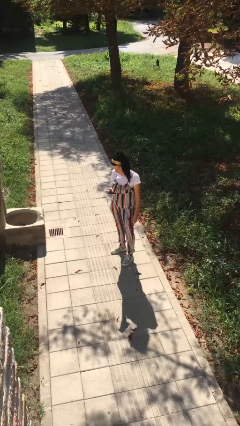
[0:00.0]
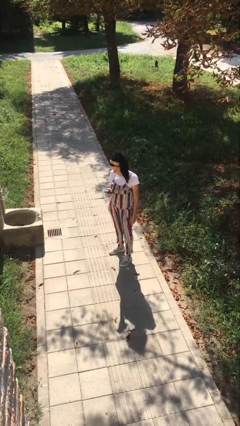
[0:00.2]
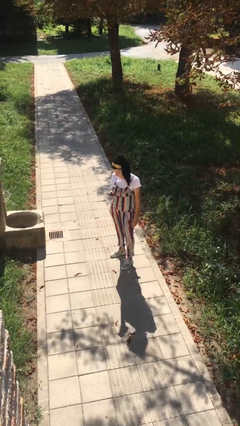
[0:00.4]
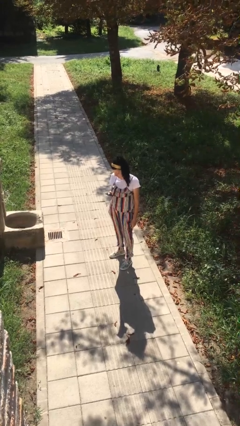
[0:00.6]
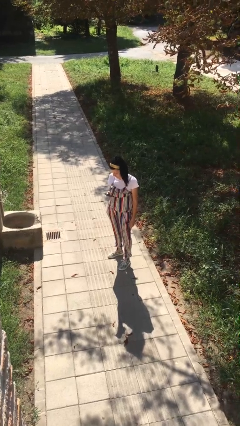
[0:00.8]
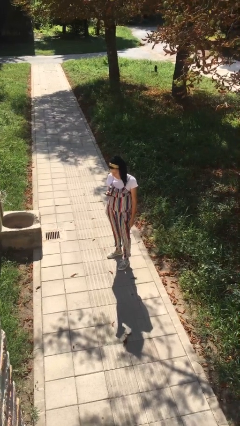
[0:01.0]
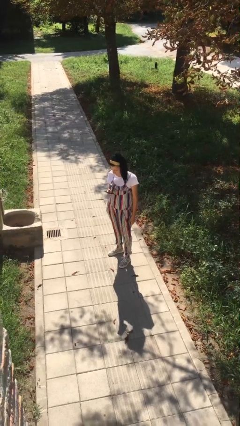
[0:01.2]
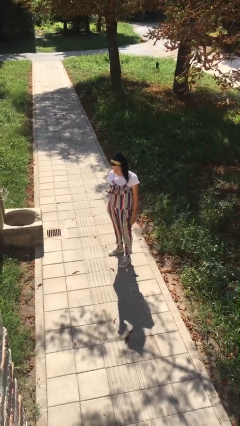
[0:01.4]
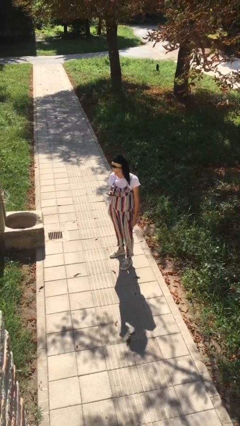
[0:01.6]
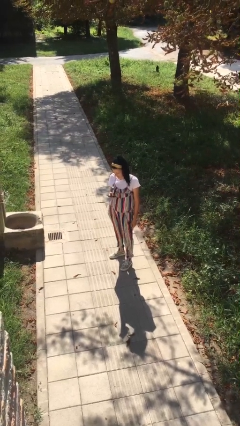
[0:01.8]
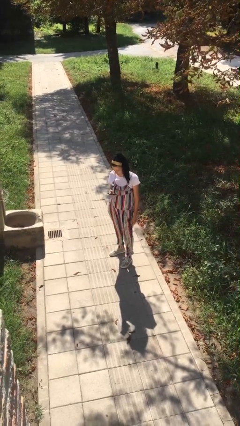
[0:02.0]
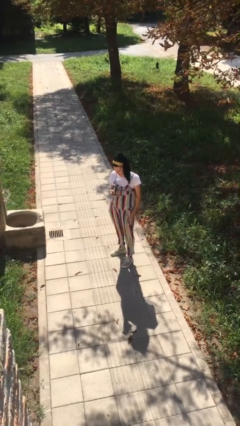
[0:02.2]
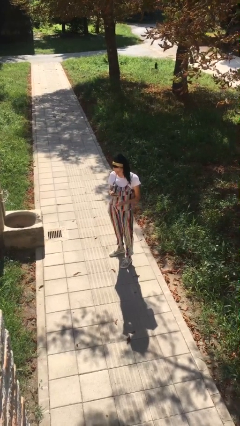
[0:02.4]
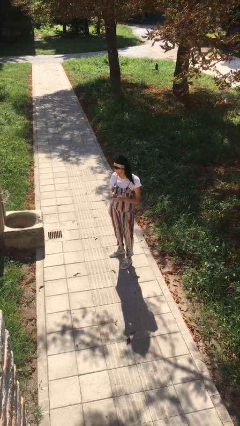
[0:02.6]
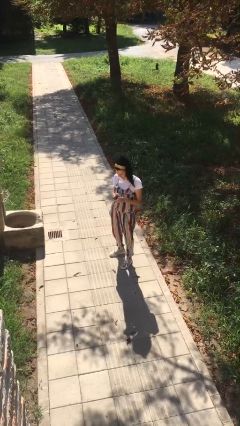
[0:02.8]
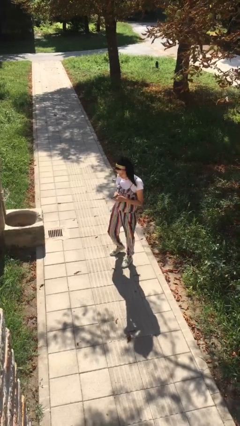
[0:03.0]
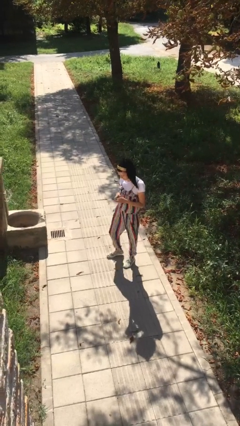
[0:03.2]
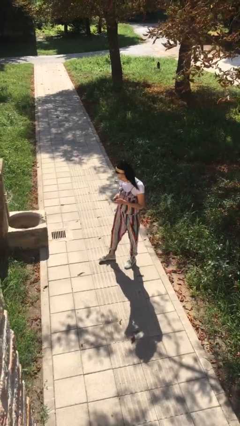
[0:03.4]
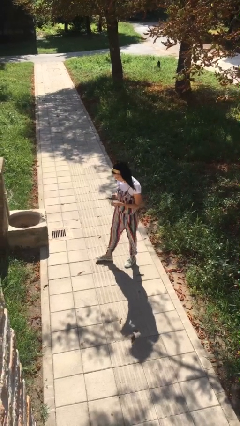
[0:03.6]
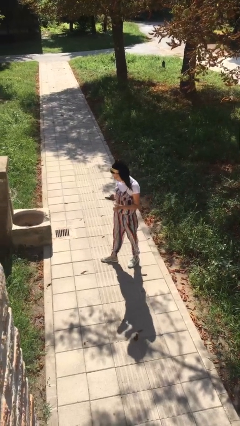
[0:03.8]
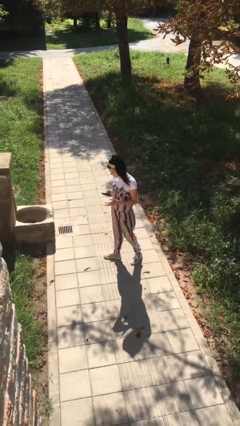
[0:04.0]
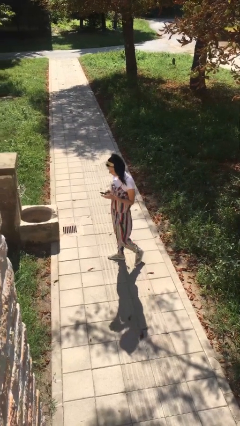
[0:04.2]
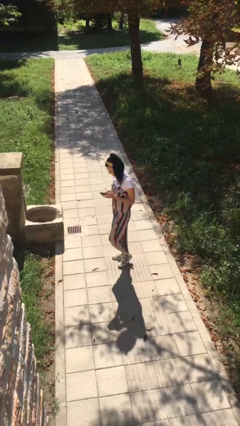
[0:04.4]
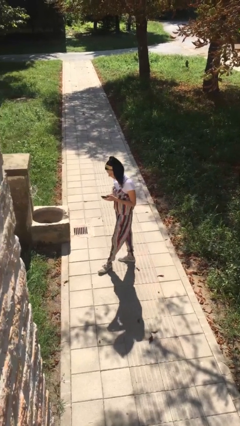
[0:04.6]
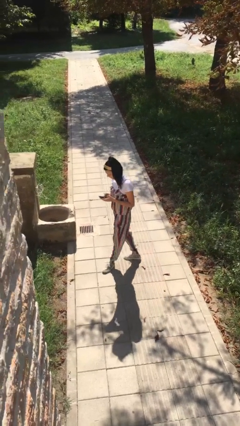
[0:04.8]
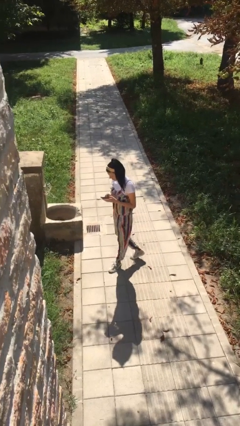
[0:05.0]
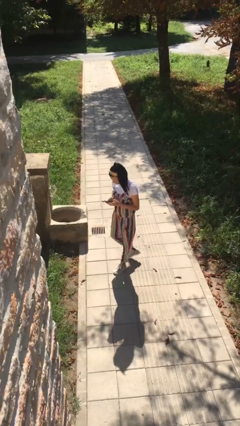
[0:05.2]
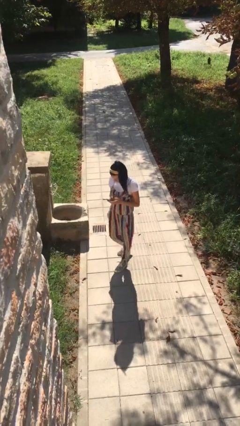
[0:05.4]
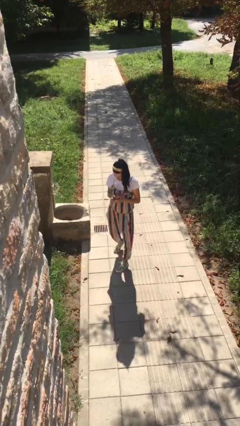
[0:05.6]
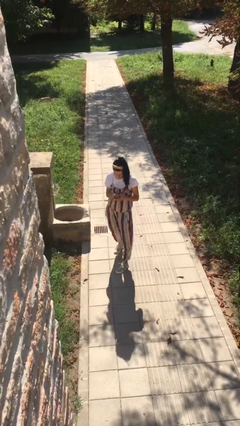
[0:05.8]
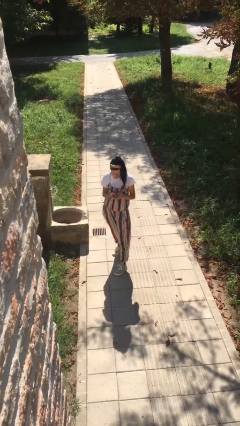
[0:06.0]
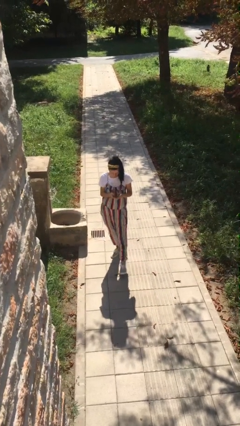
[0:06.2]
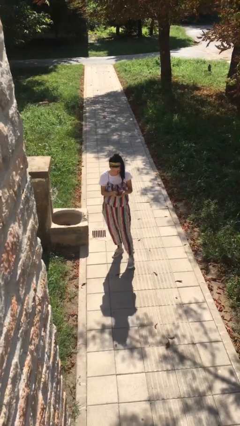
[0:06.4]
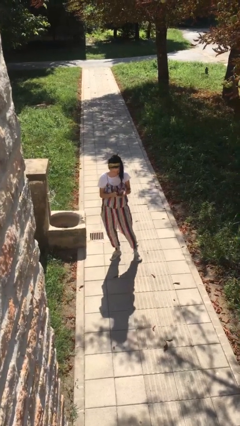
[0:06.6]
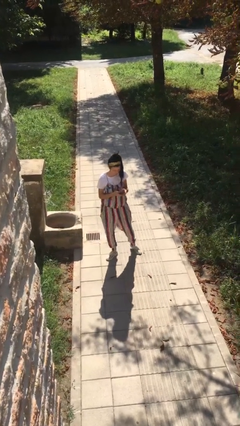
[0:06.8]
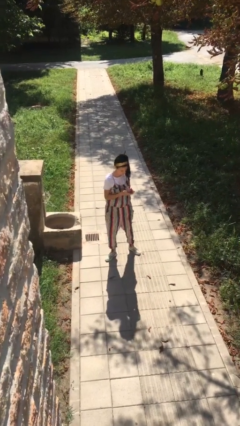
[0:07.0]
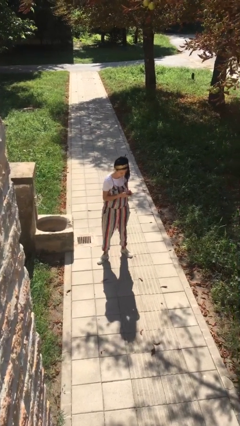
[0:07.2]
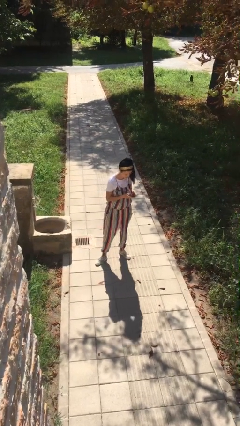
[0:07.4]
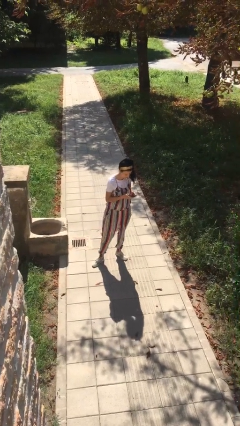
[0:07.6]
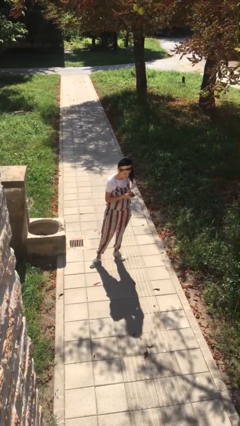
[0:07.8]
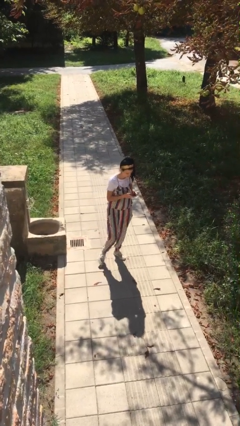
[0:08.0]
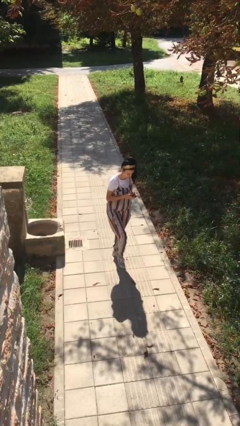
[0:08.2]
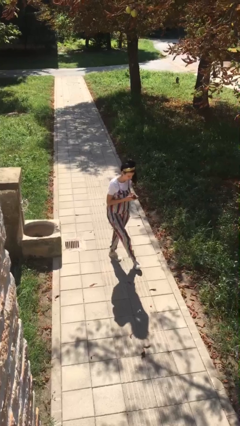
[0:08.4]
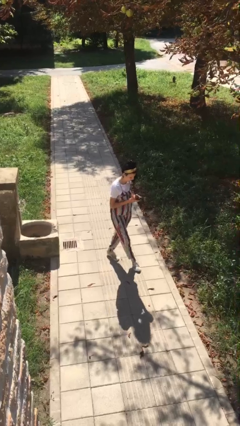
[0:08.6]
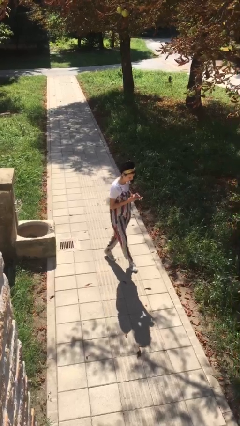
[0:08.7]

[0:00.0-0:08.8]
person texts on phone

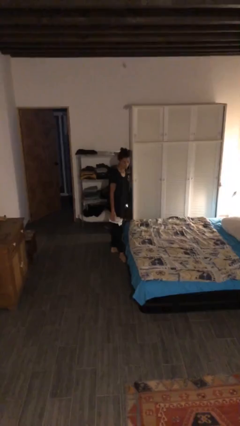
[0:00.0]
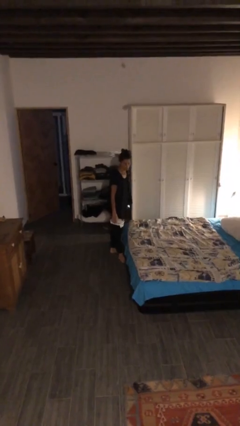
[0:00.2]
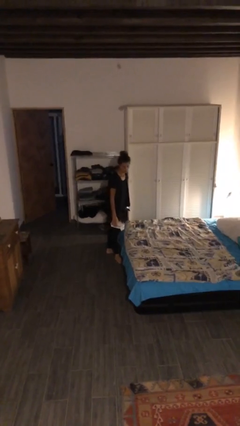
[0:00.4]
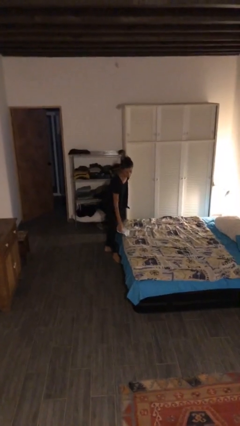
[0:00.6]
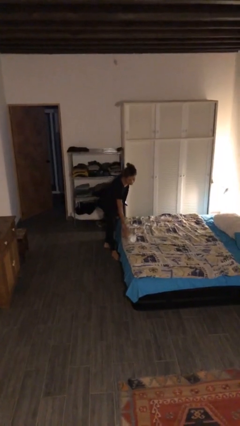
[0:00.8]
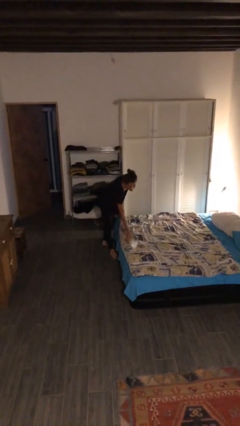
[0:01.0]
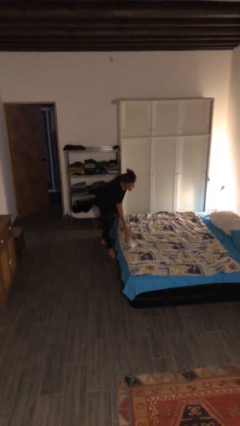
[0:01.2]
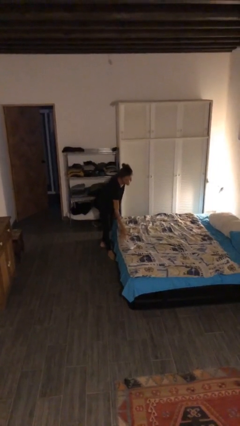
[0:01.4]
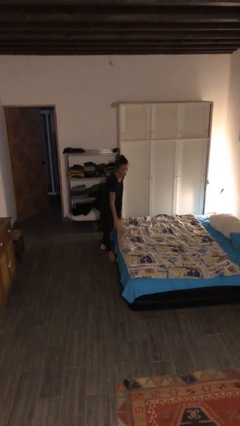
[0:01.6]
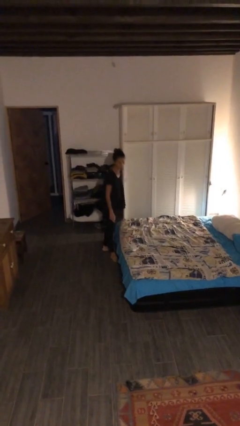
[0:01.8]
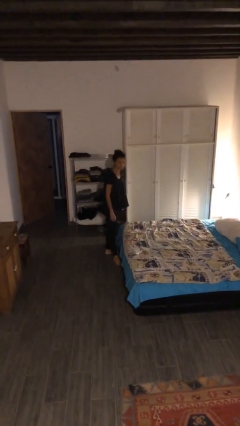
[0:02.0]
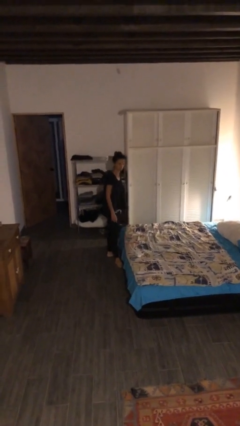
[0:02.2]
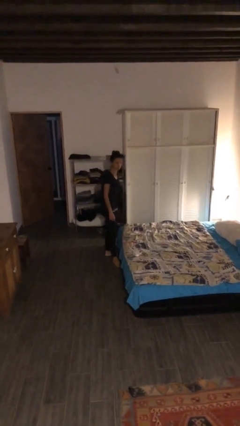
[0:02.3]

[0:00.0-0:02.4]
person puts down object on bed

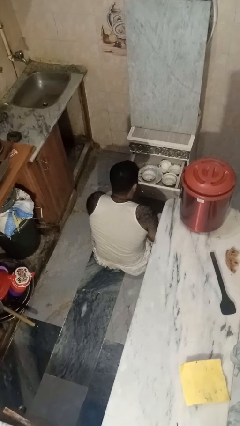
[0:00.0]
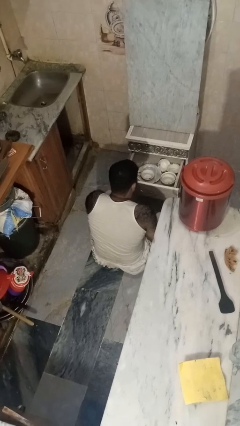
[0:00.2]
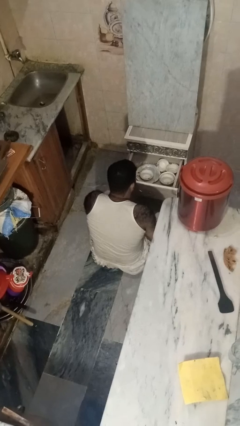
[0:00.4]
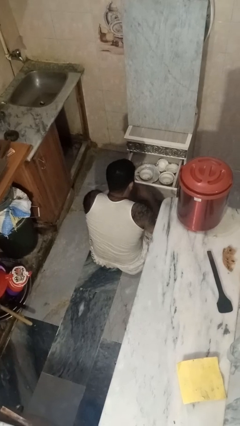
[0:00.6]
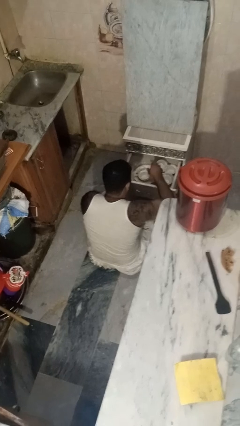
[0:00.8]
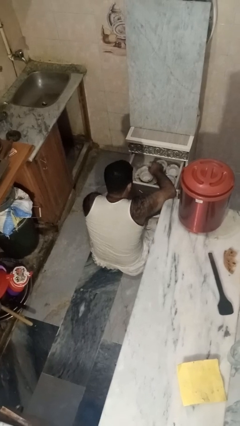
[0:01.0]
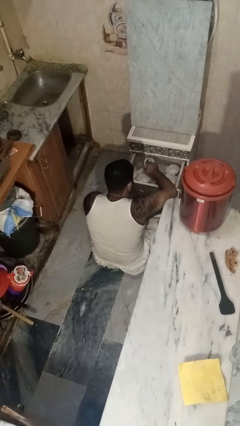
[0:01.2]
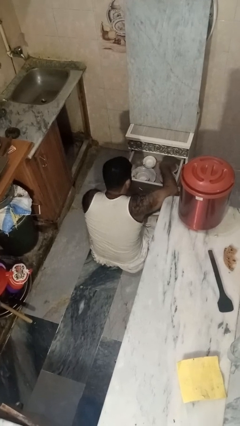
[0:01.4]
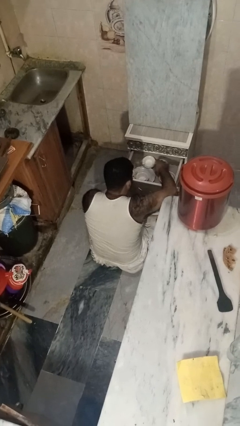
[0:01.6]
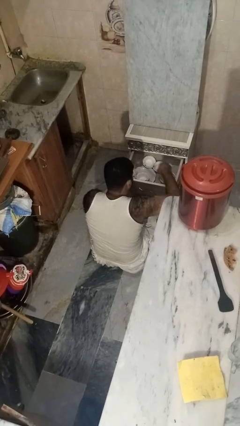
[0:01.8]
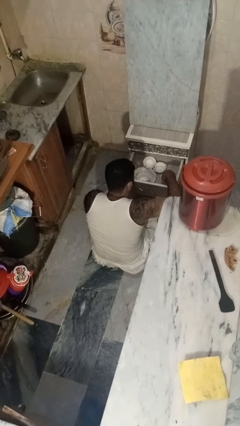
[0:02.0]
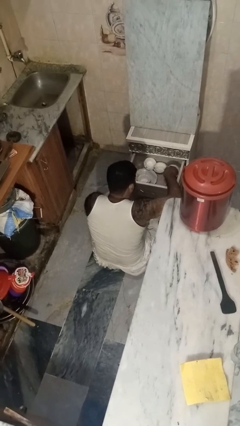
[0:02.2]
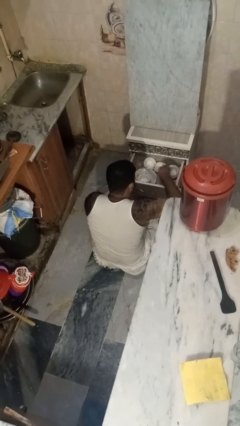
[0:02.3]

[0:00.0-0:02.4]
person searches in kitchen drawer

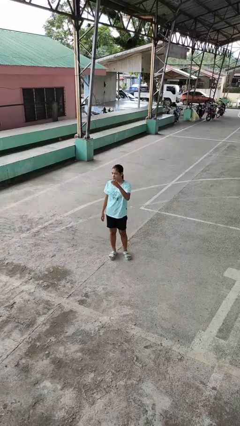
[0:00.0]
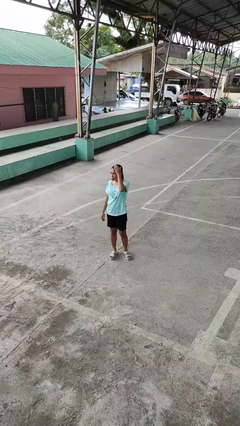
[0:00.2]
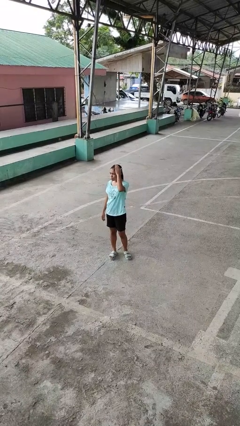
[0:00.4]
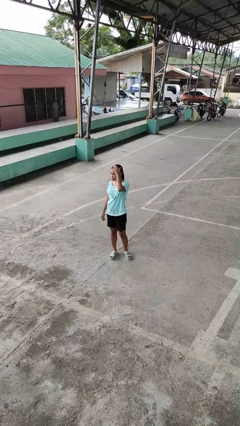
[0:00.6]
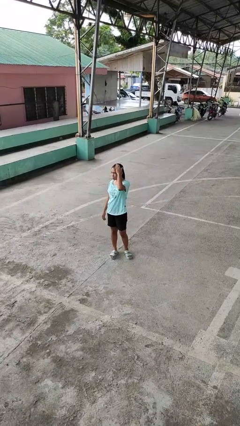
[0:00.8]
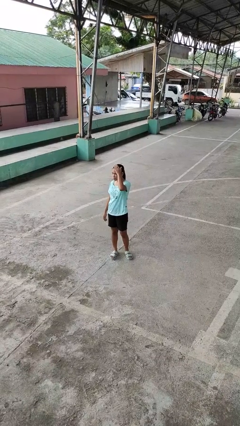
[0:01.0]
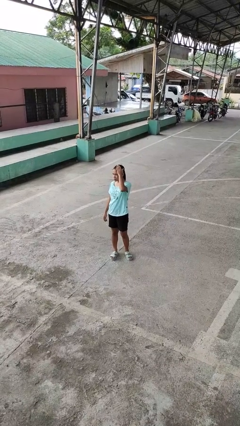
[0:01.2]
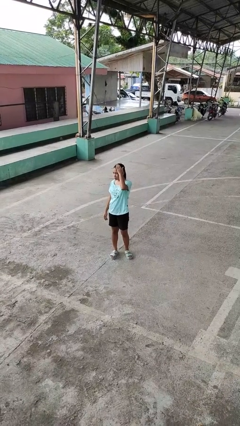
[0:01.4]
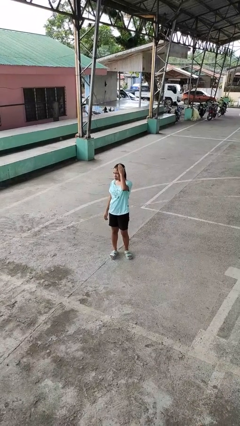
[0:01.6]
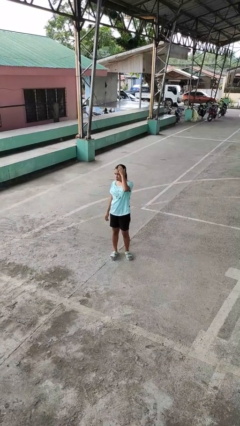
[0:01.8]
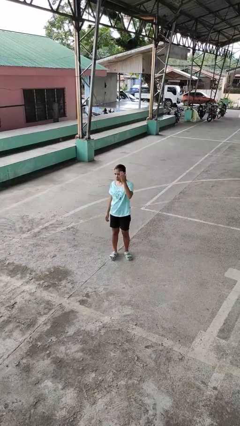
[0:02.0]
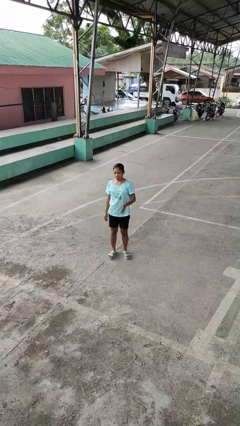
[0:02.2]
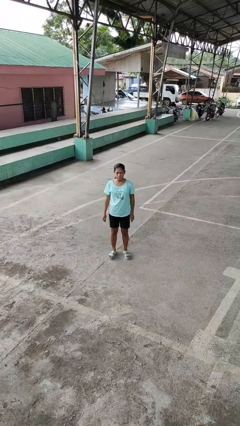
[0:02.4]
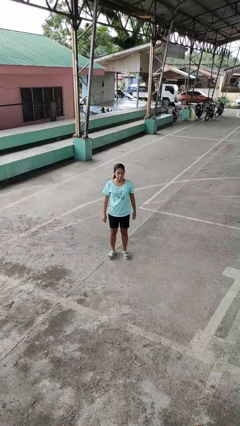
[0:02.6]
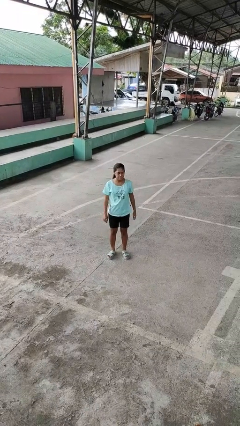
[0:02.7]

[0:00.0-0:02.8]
person pats head

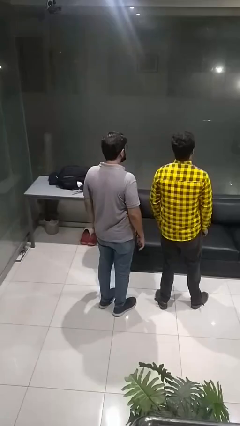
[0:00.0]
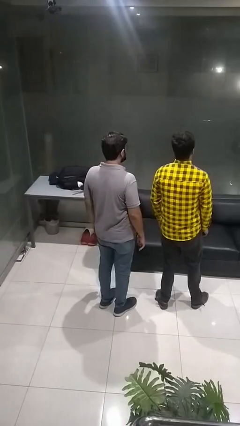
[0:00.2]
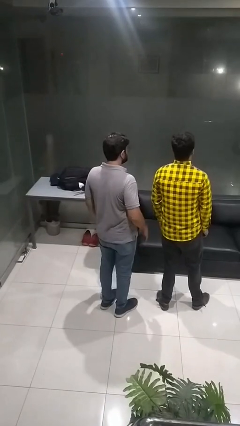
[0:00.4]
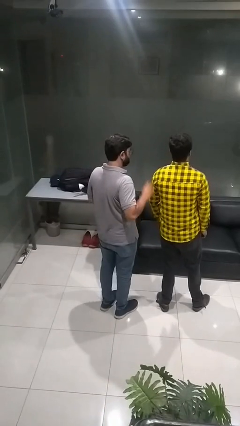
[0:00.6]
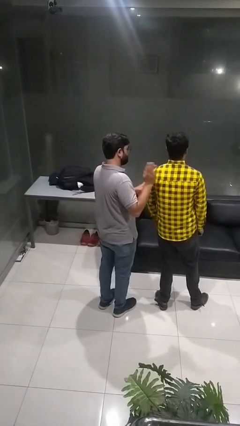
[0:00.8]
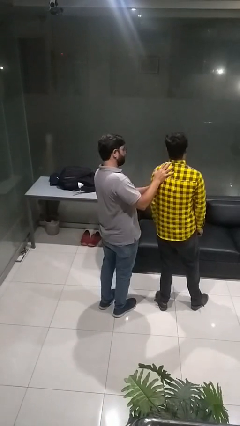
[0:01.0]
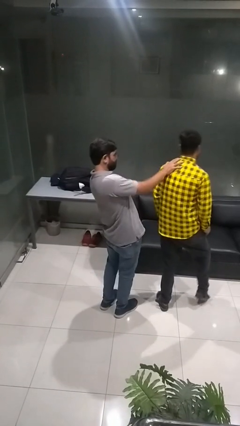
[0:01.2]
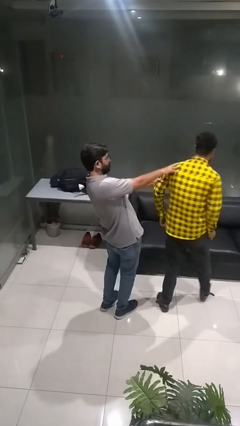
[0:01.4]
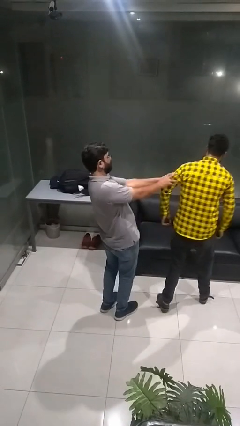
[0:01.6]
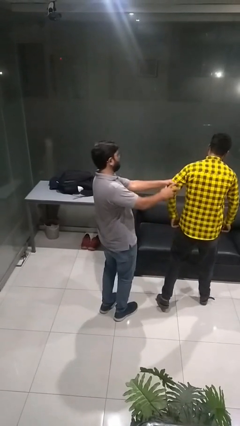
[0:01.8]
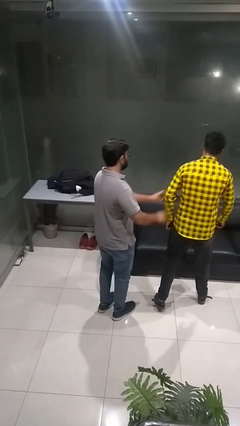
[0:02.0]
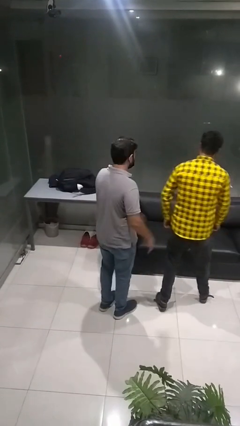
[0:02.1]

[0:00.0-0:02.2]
person shoves person
